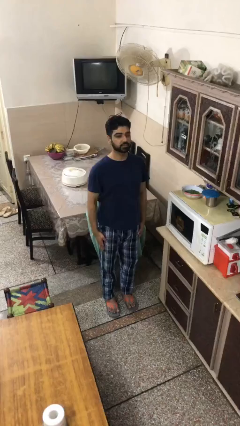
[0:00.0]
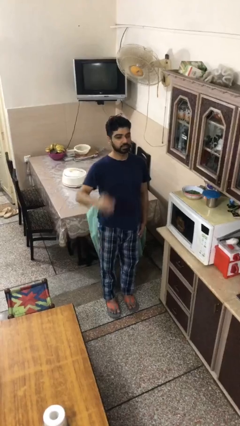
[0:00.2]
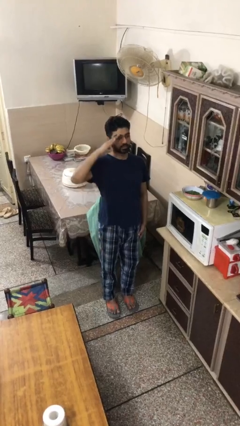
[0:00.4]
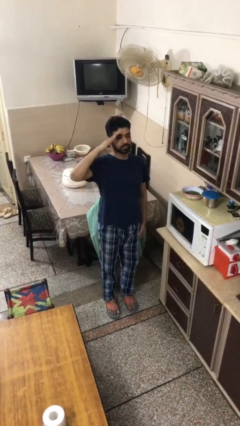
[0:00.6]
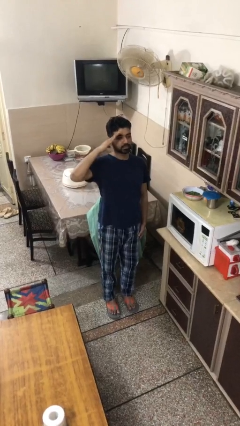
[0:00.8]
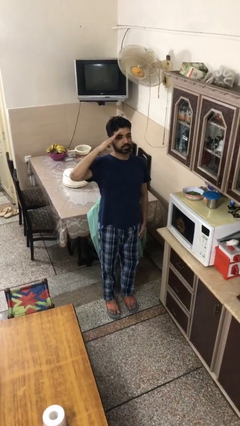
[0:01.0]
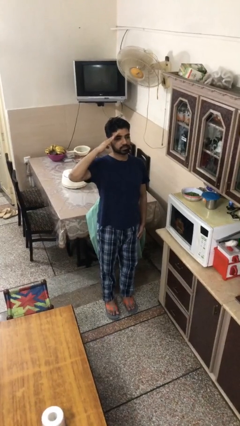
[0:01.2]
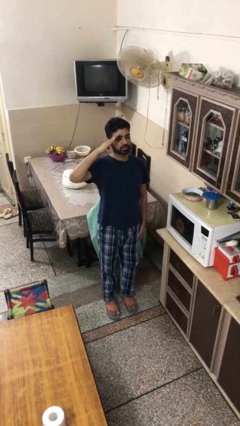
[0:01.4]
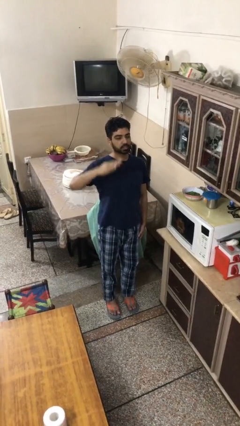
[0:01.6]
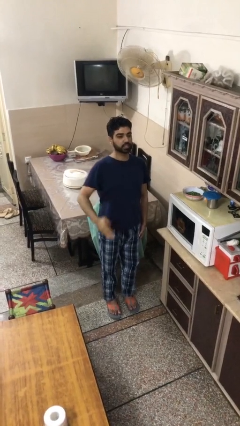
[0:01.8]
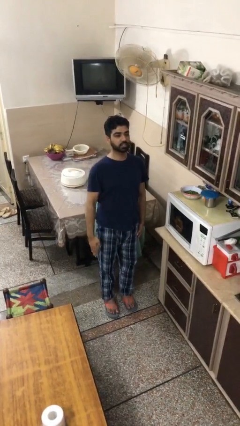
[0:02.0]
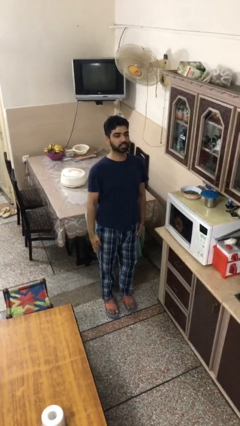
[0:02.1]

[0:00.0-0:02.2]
person salutes

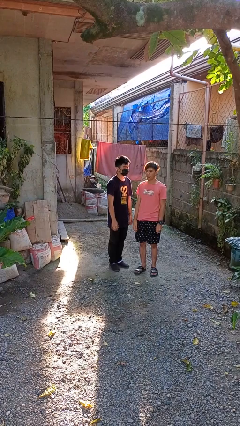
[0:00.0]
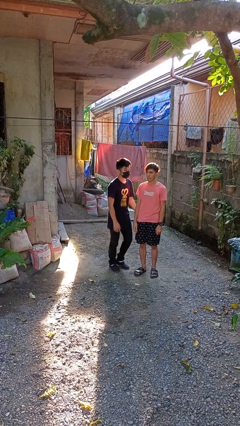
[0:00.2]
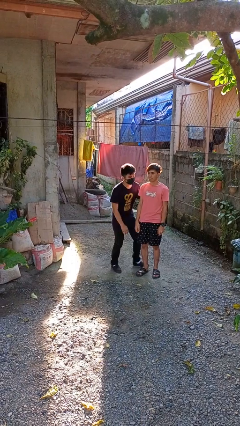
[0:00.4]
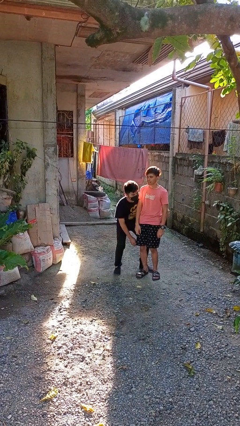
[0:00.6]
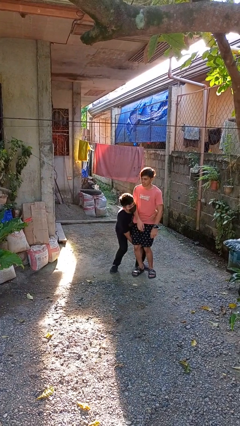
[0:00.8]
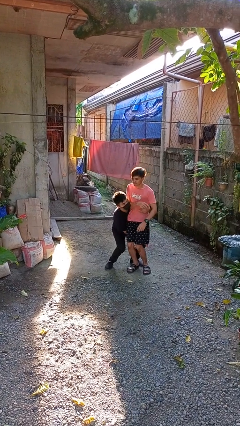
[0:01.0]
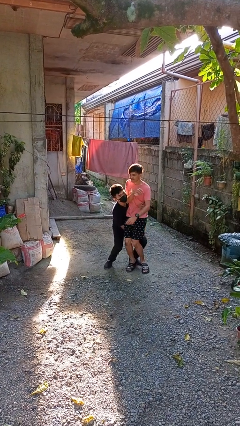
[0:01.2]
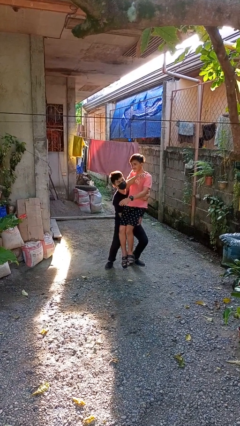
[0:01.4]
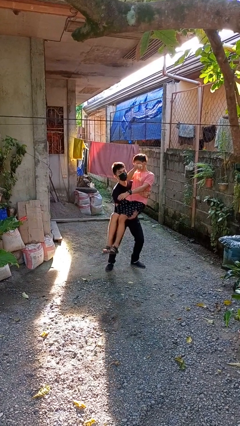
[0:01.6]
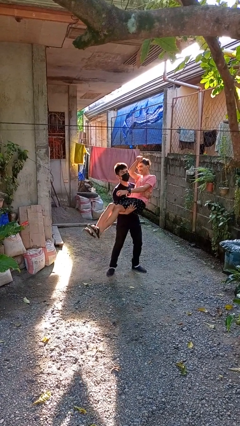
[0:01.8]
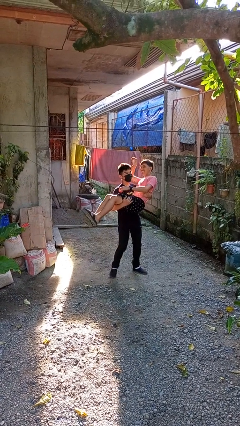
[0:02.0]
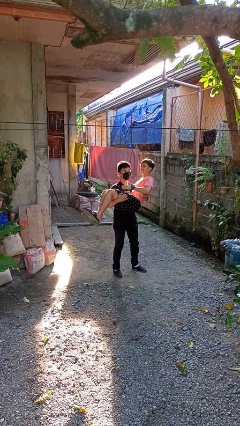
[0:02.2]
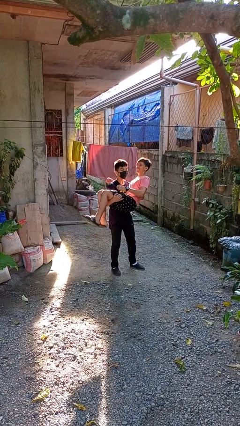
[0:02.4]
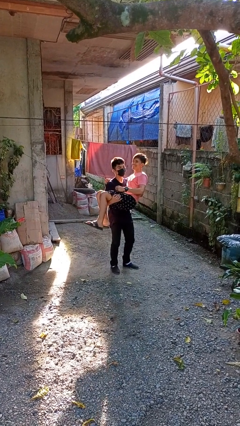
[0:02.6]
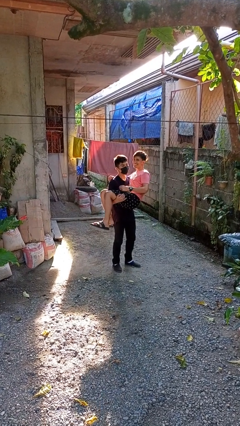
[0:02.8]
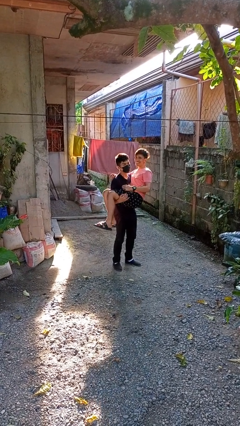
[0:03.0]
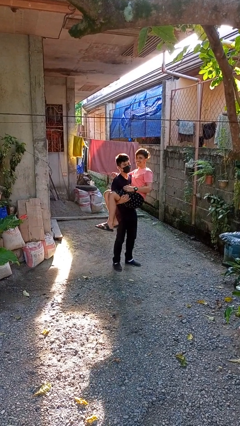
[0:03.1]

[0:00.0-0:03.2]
person picks up person

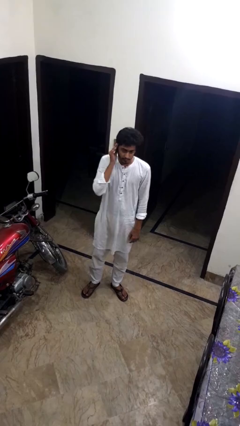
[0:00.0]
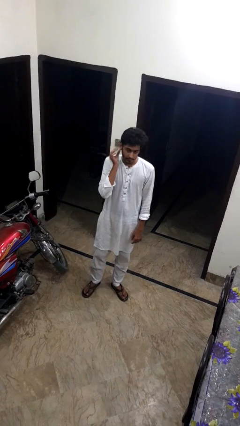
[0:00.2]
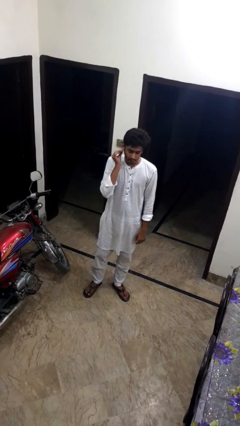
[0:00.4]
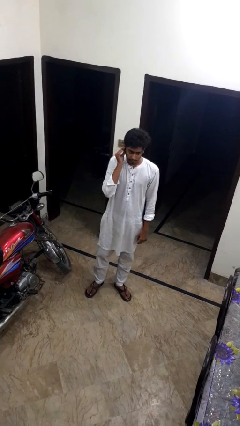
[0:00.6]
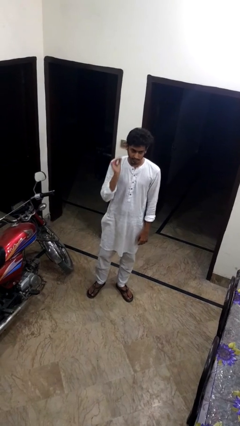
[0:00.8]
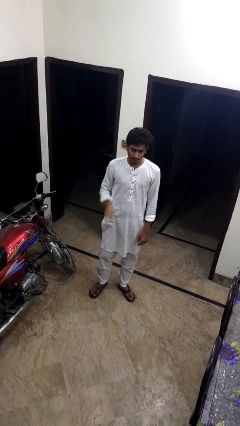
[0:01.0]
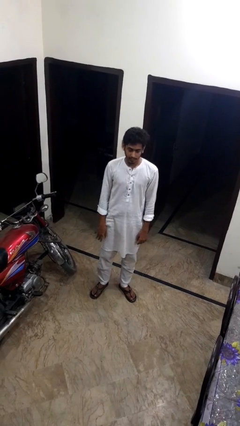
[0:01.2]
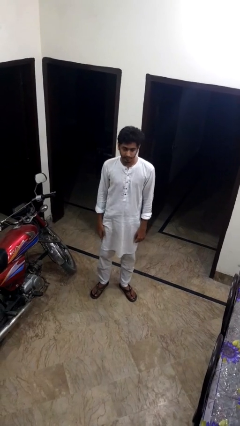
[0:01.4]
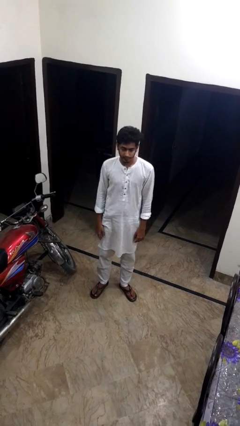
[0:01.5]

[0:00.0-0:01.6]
person touches earlobe

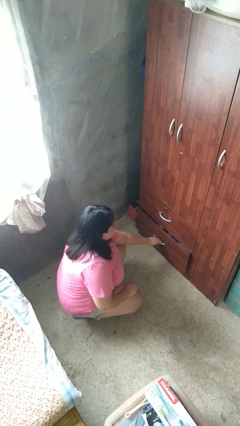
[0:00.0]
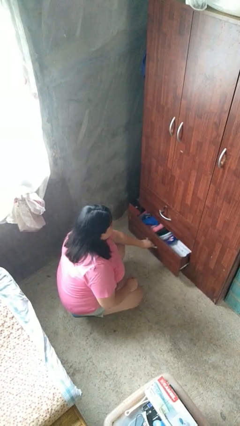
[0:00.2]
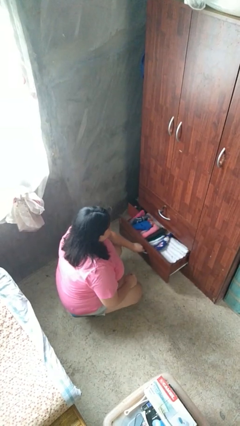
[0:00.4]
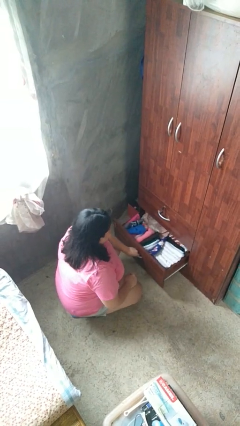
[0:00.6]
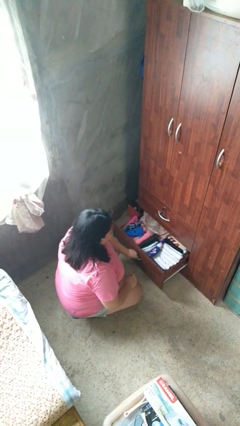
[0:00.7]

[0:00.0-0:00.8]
person opens dresser drawer

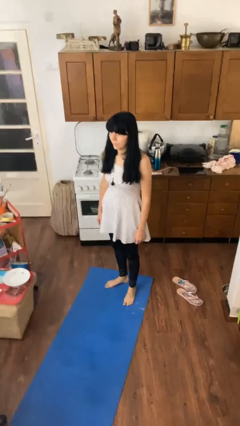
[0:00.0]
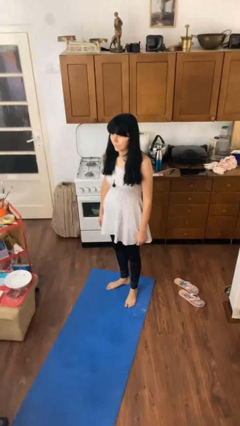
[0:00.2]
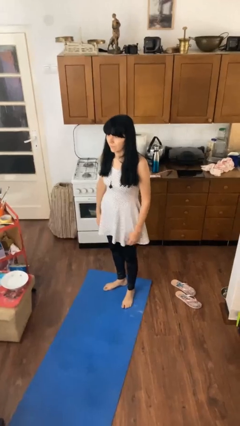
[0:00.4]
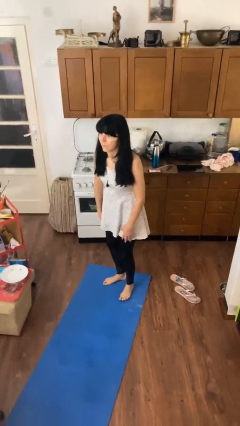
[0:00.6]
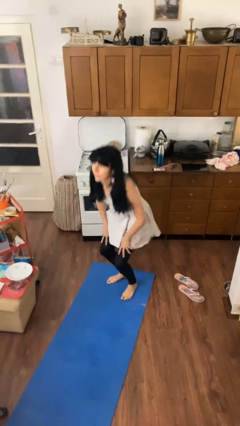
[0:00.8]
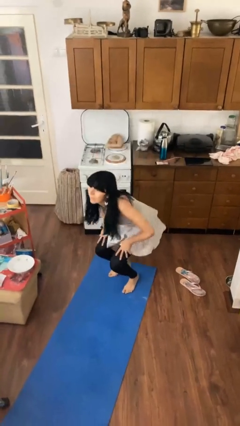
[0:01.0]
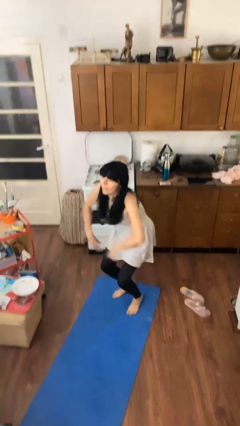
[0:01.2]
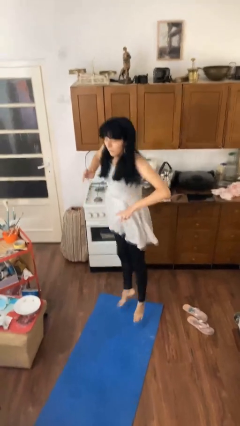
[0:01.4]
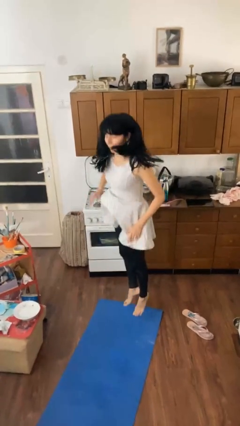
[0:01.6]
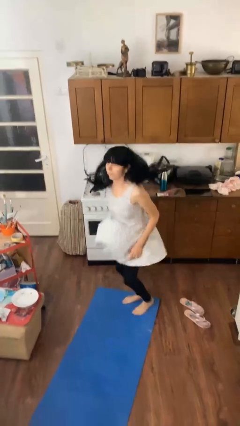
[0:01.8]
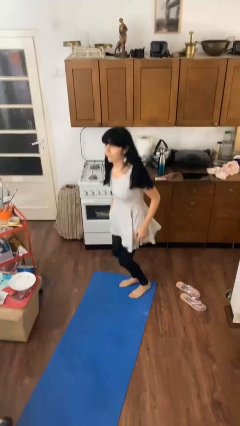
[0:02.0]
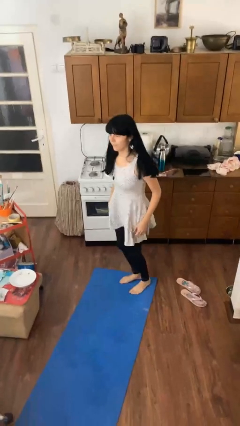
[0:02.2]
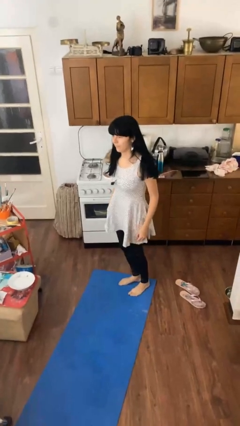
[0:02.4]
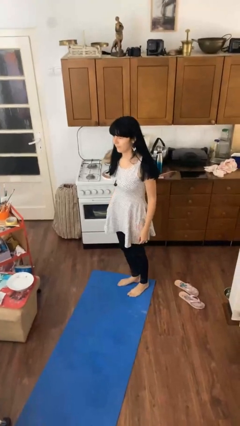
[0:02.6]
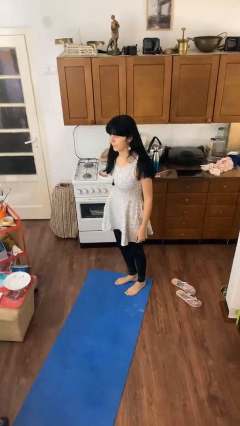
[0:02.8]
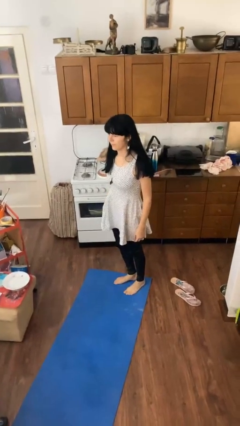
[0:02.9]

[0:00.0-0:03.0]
person jumps

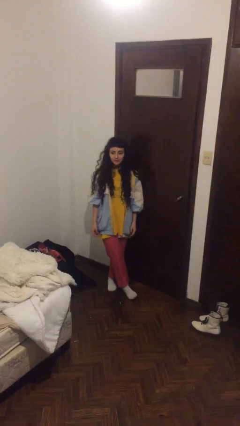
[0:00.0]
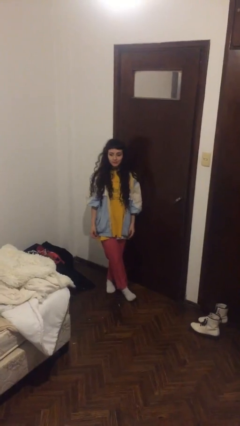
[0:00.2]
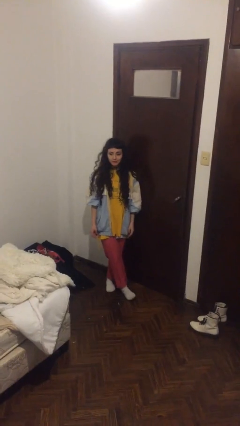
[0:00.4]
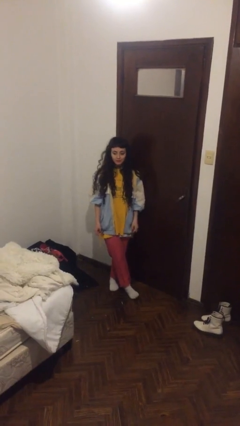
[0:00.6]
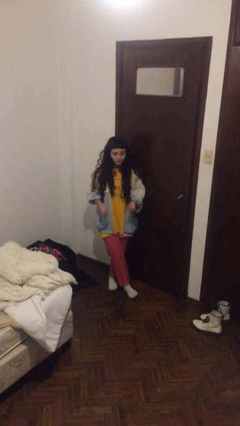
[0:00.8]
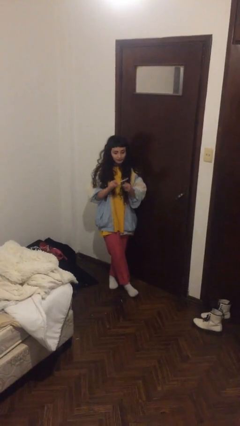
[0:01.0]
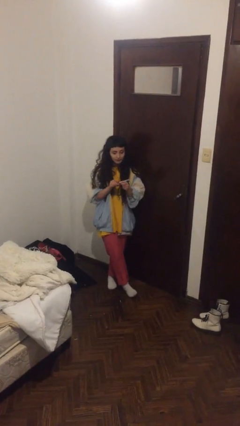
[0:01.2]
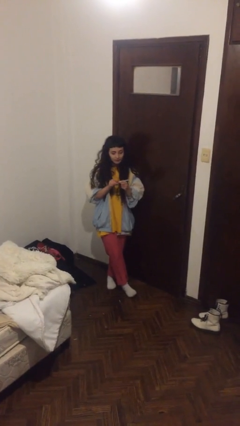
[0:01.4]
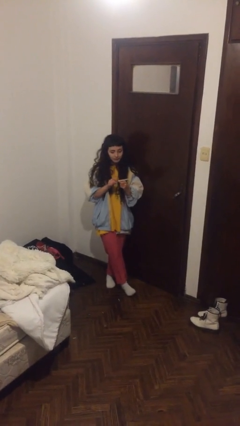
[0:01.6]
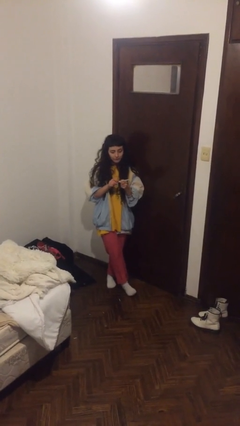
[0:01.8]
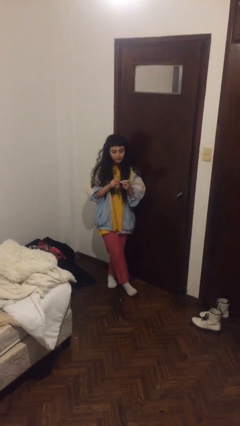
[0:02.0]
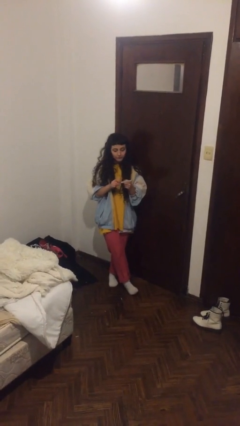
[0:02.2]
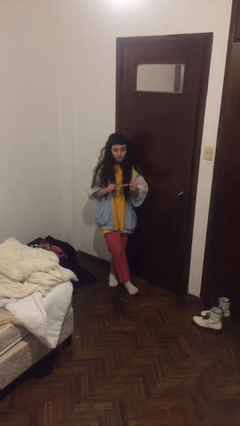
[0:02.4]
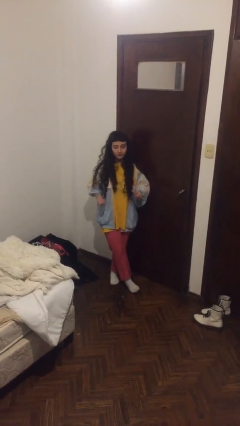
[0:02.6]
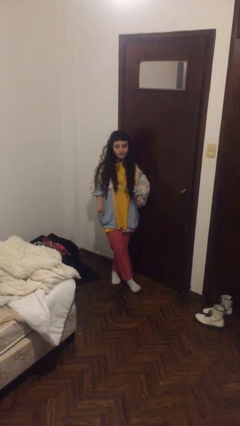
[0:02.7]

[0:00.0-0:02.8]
person files fingernails

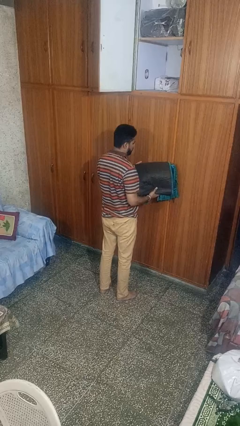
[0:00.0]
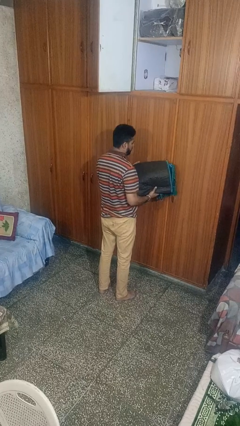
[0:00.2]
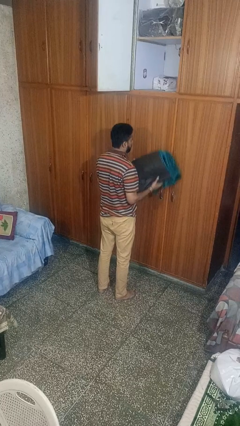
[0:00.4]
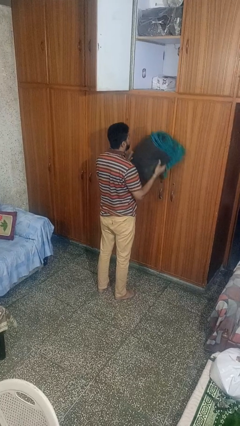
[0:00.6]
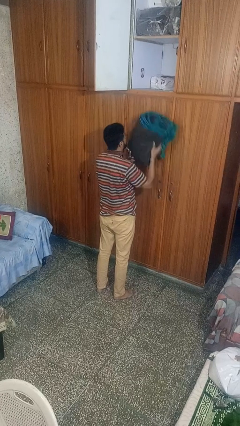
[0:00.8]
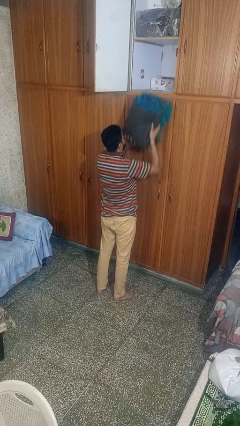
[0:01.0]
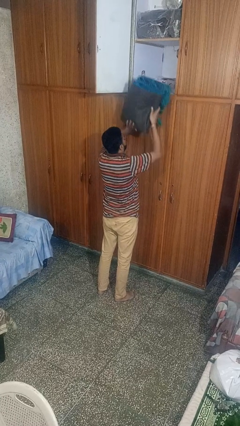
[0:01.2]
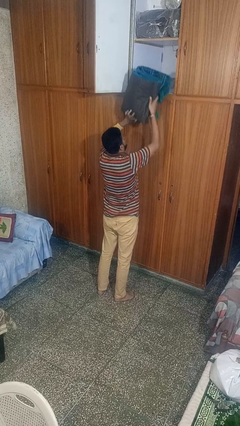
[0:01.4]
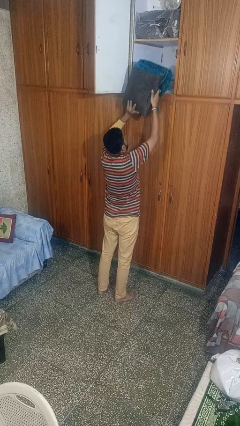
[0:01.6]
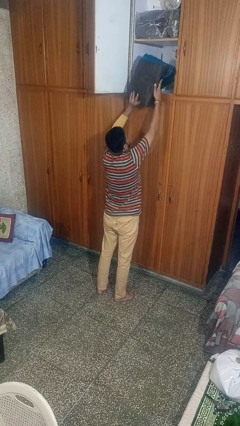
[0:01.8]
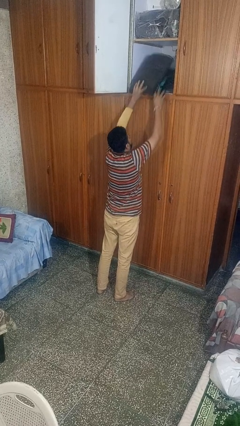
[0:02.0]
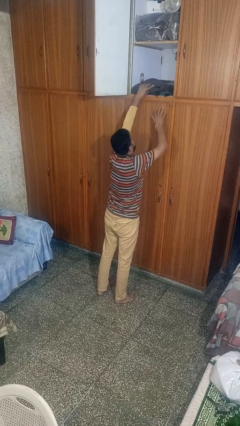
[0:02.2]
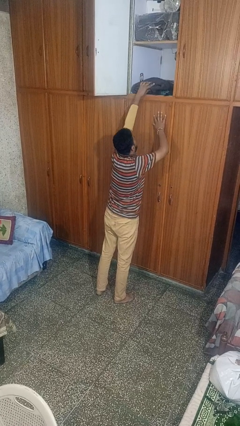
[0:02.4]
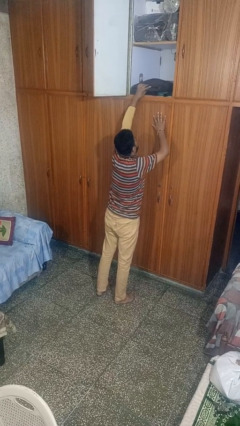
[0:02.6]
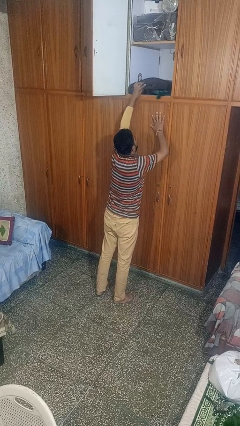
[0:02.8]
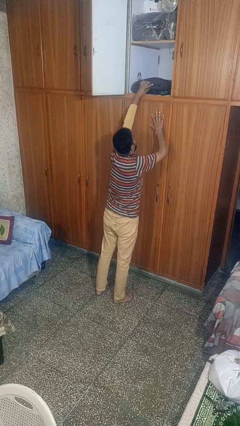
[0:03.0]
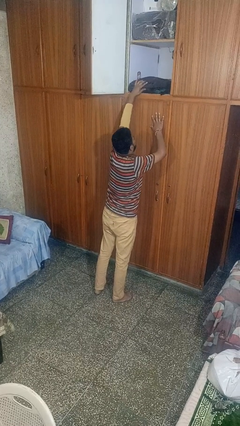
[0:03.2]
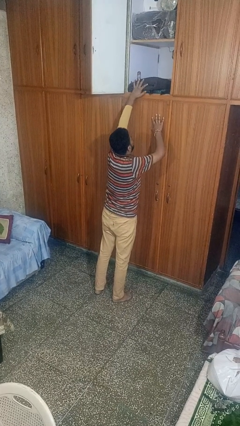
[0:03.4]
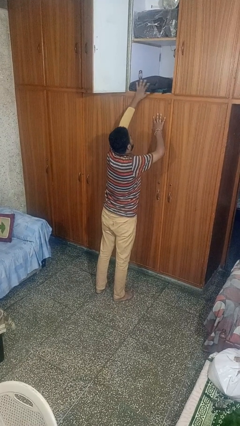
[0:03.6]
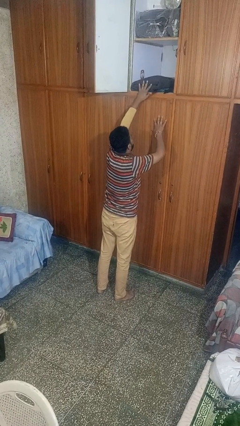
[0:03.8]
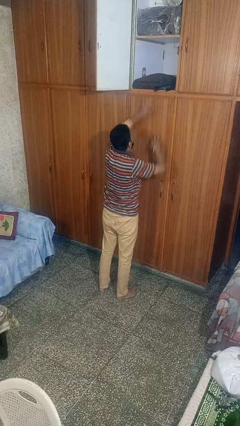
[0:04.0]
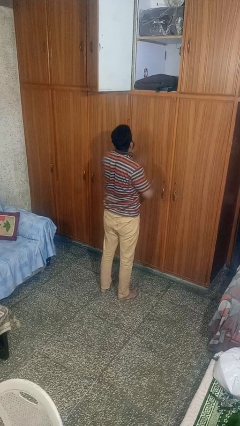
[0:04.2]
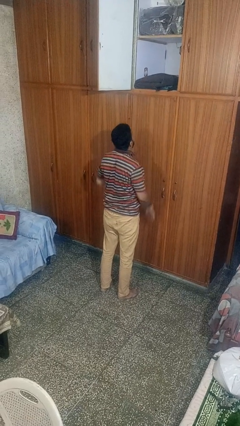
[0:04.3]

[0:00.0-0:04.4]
person puts down object on shelf
